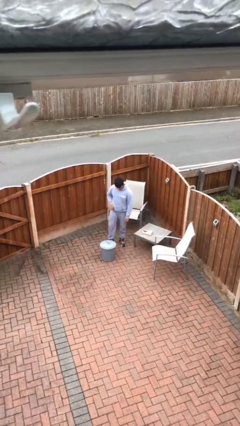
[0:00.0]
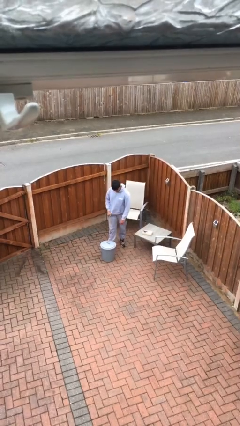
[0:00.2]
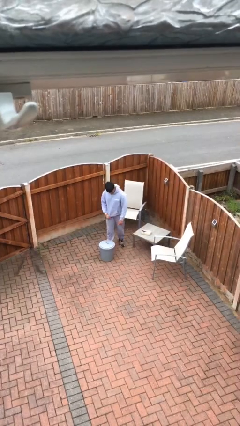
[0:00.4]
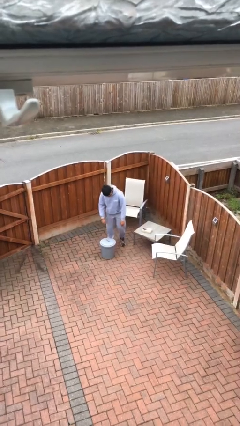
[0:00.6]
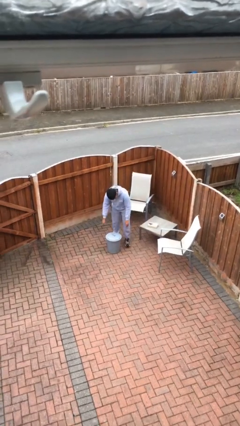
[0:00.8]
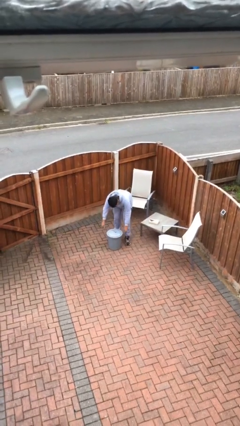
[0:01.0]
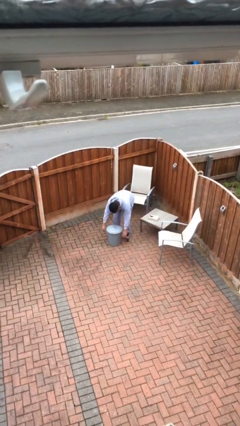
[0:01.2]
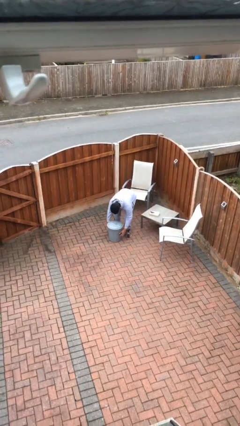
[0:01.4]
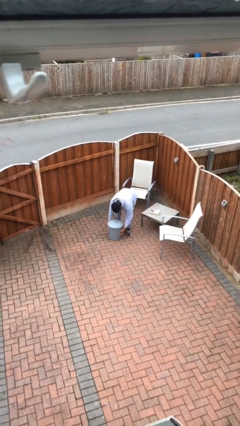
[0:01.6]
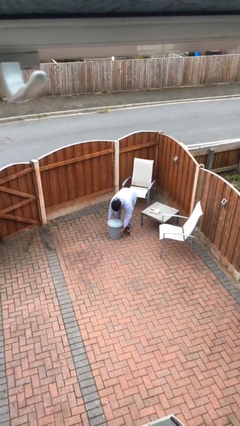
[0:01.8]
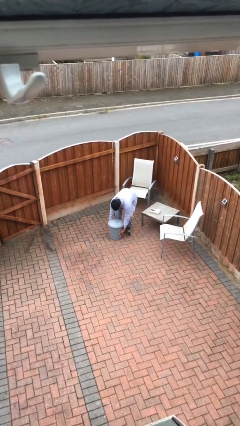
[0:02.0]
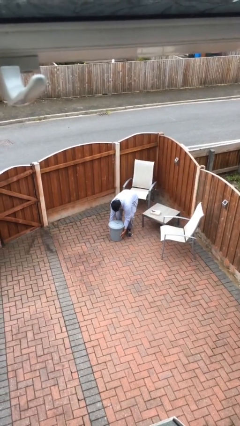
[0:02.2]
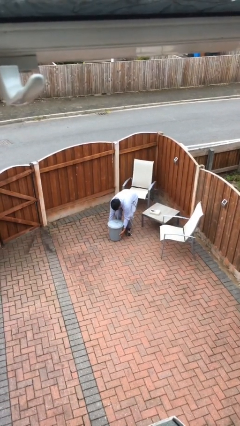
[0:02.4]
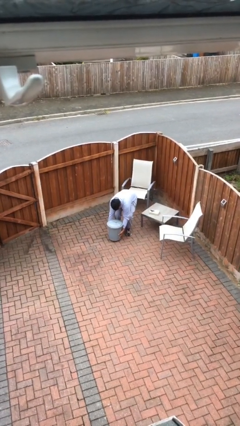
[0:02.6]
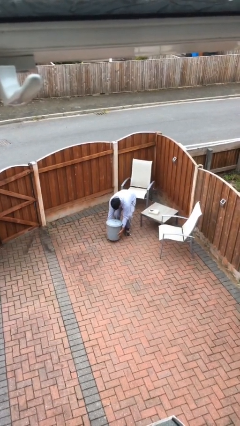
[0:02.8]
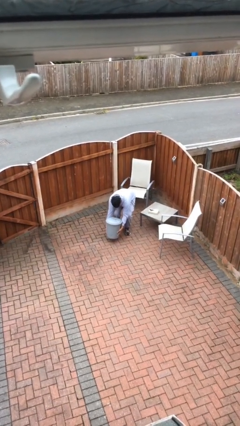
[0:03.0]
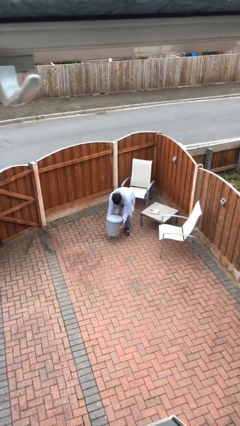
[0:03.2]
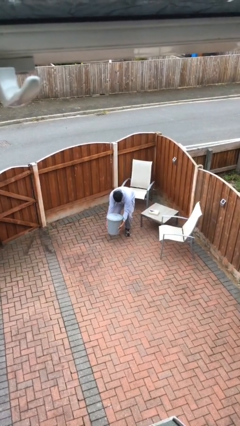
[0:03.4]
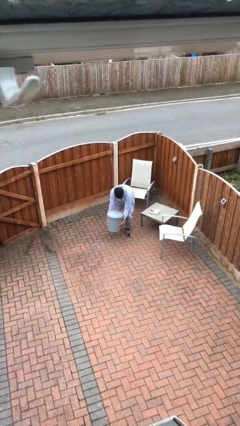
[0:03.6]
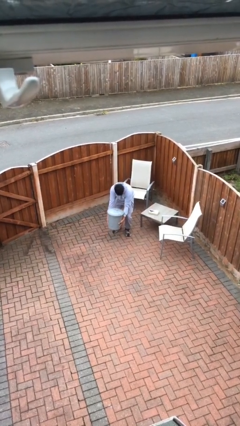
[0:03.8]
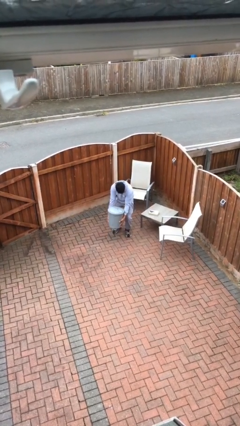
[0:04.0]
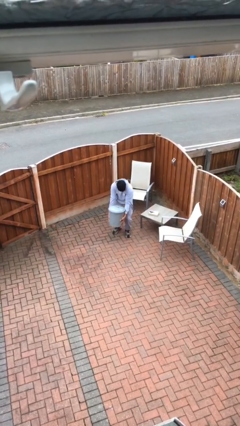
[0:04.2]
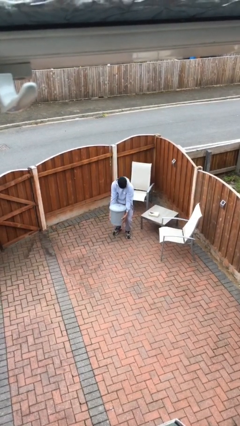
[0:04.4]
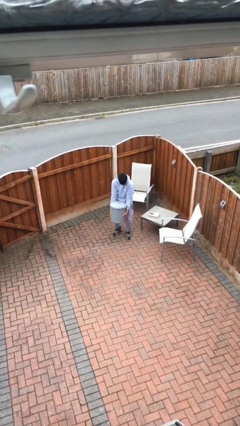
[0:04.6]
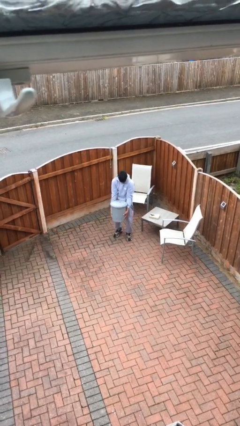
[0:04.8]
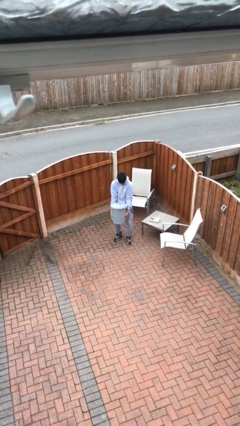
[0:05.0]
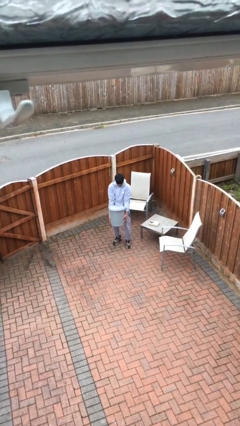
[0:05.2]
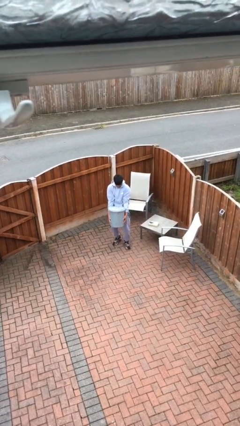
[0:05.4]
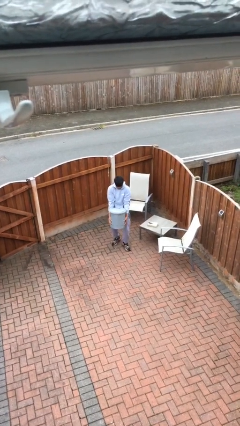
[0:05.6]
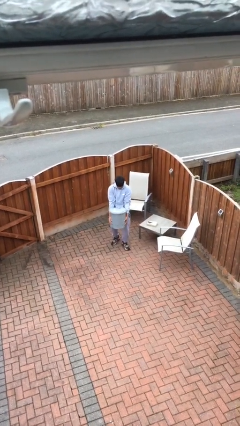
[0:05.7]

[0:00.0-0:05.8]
person picks up object from floor

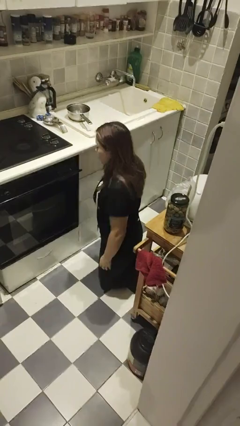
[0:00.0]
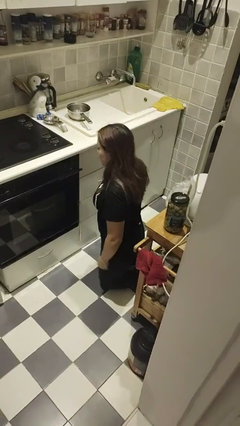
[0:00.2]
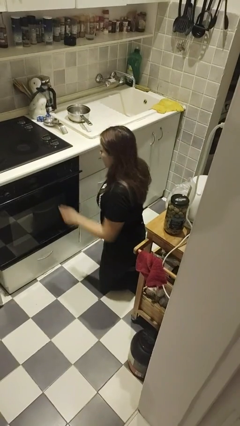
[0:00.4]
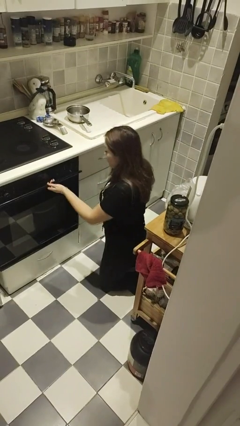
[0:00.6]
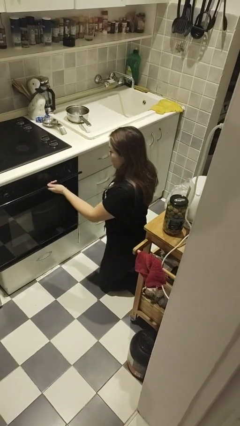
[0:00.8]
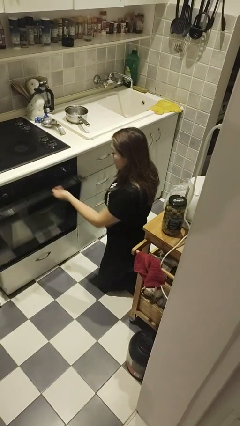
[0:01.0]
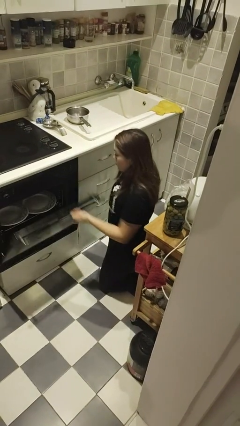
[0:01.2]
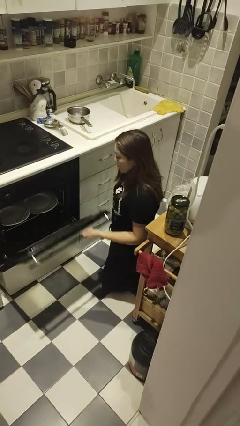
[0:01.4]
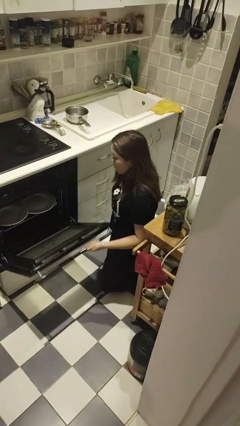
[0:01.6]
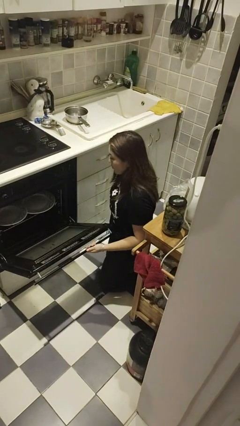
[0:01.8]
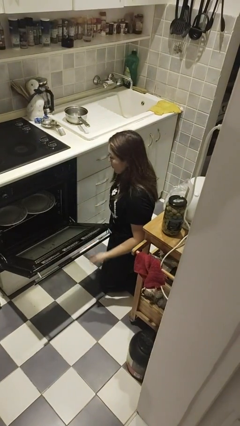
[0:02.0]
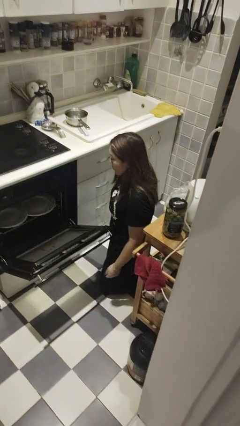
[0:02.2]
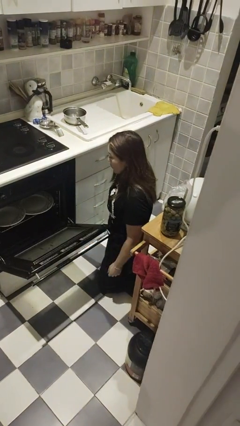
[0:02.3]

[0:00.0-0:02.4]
person opens dishwasher

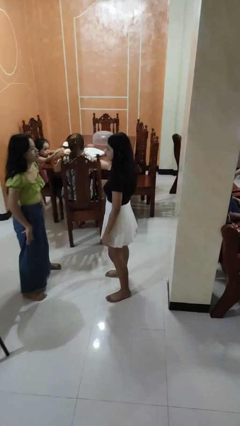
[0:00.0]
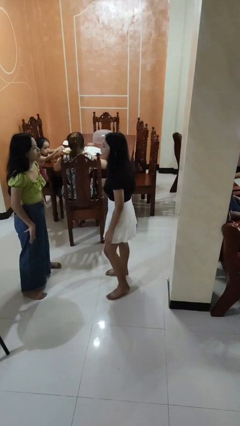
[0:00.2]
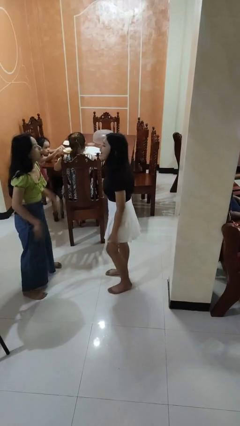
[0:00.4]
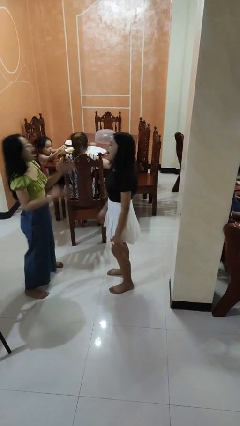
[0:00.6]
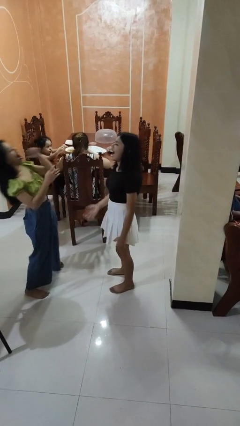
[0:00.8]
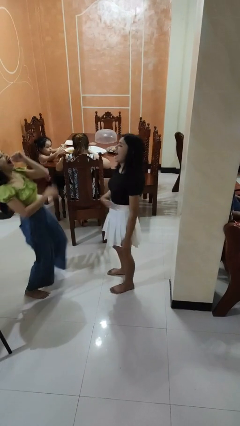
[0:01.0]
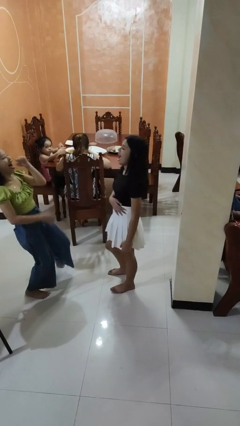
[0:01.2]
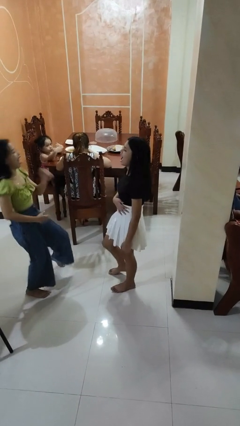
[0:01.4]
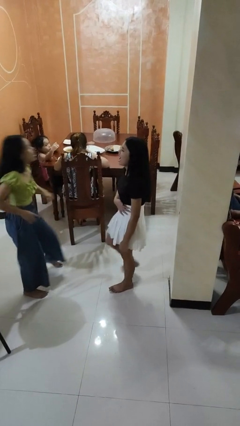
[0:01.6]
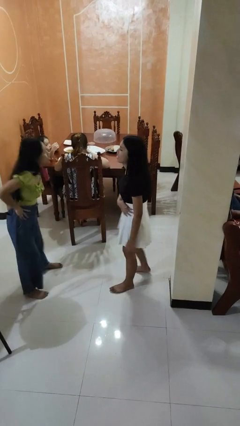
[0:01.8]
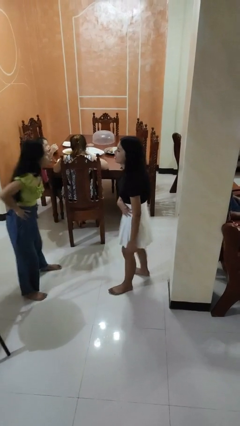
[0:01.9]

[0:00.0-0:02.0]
person laughs with person

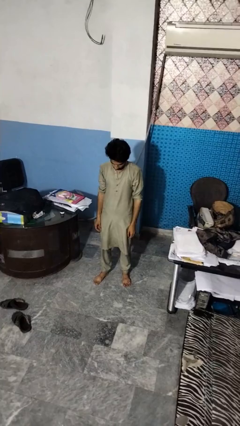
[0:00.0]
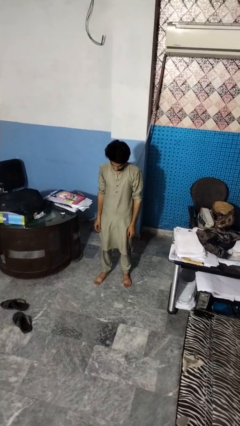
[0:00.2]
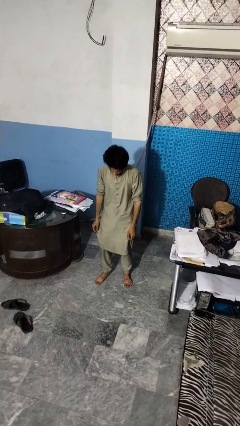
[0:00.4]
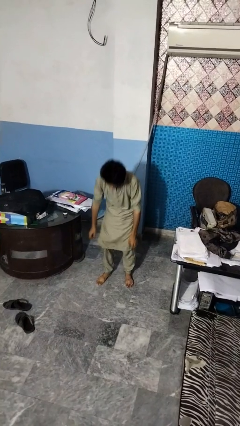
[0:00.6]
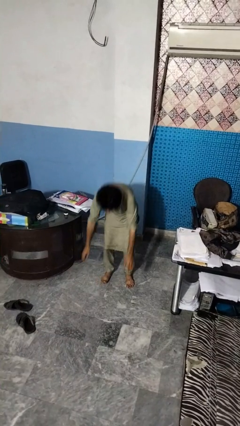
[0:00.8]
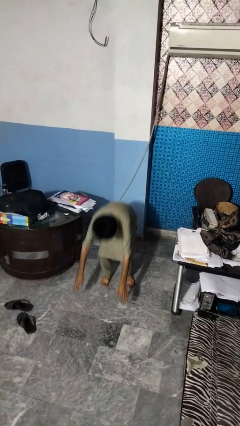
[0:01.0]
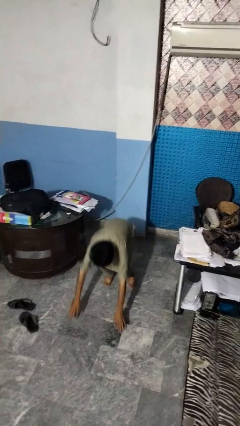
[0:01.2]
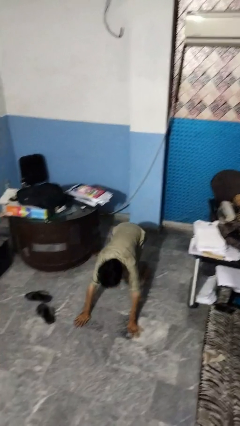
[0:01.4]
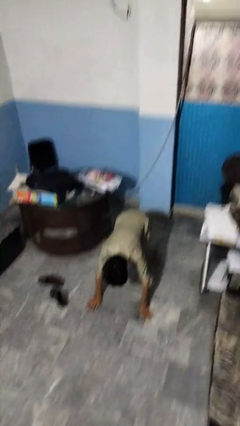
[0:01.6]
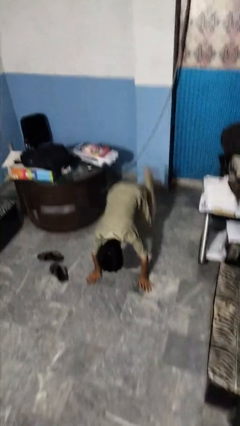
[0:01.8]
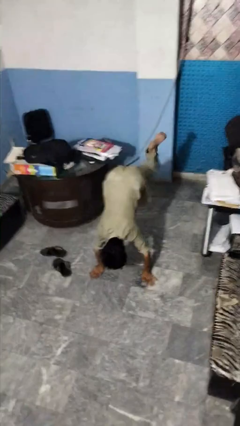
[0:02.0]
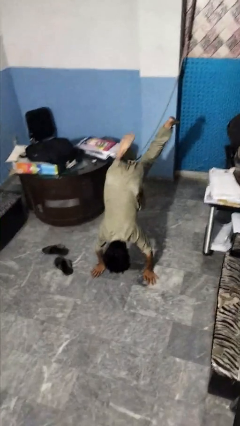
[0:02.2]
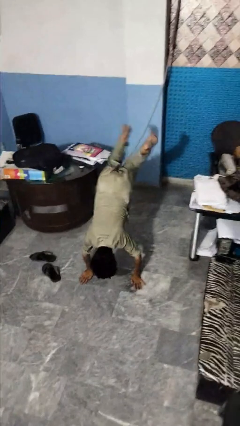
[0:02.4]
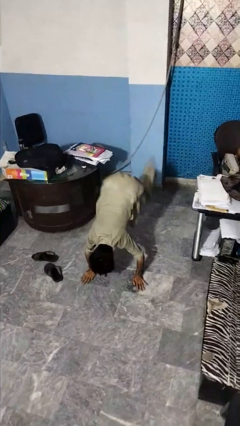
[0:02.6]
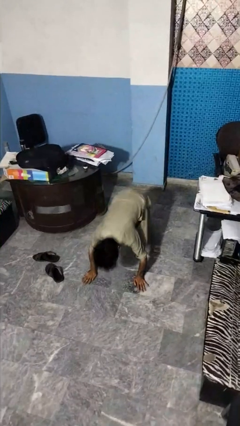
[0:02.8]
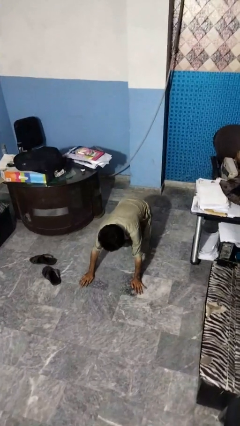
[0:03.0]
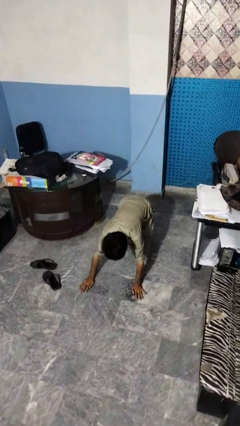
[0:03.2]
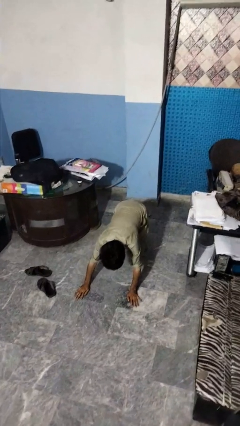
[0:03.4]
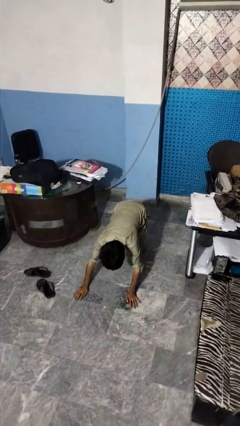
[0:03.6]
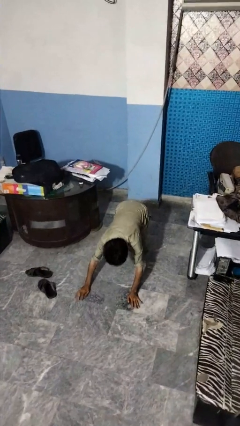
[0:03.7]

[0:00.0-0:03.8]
person handstand

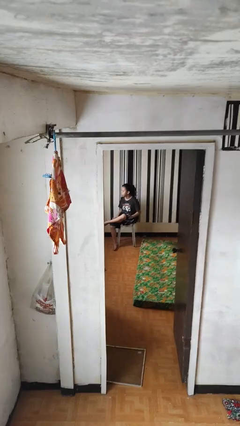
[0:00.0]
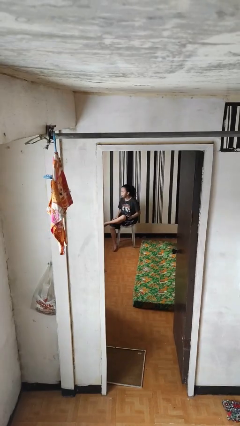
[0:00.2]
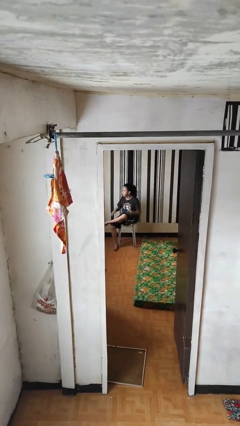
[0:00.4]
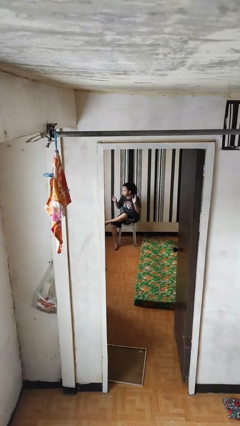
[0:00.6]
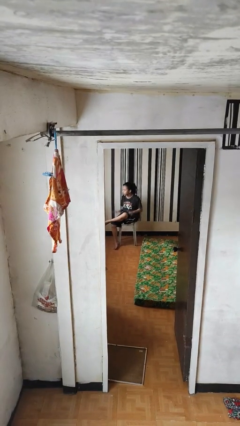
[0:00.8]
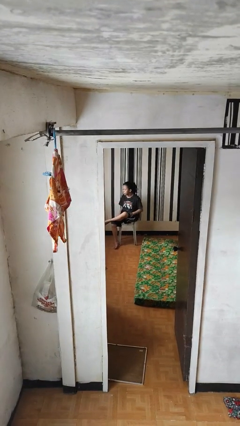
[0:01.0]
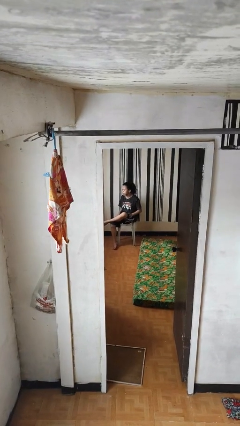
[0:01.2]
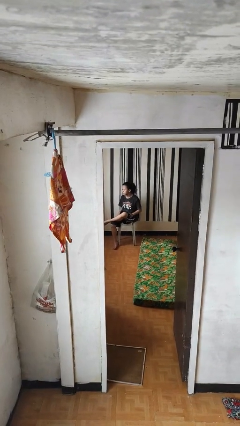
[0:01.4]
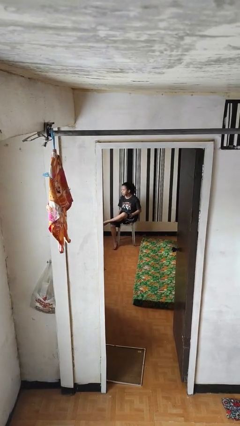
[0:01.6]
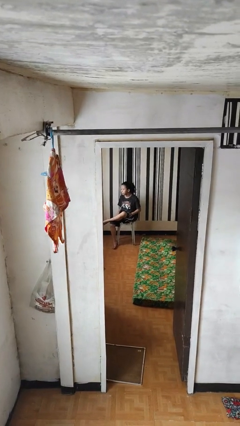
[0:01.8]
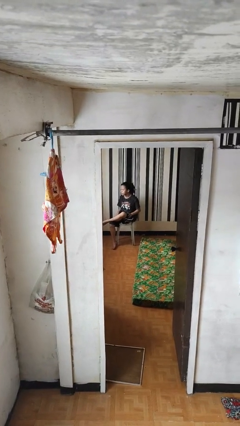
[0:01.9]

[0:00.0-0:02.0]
person slaps hands on thighs

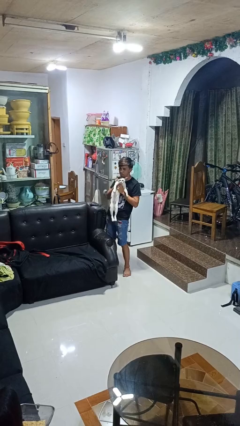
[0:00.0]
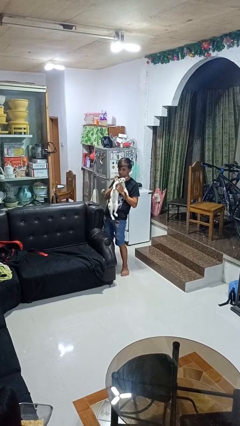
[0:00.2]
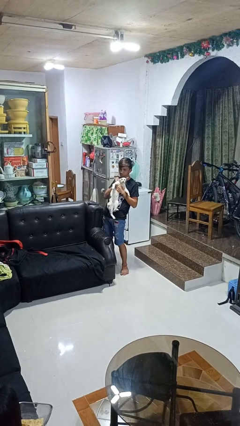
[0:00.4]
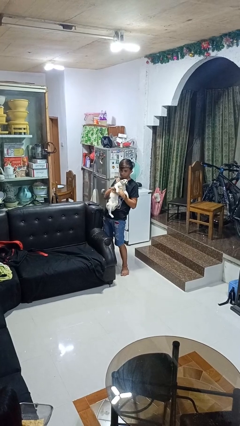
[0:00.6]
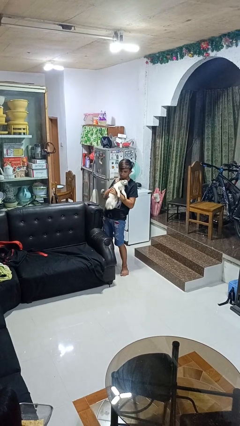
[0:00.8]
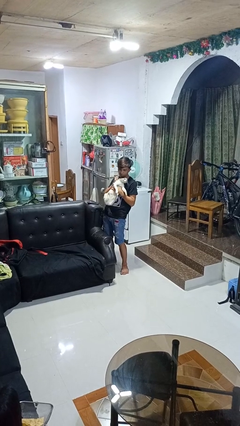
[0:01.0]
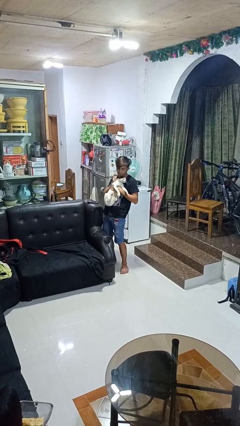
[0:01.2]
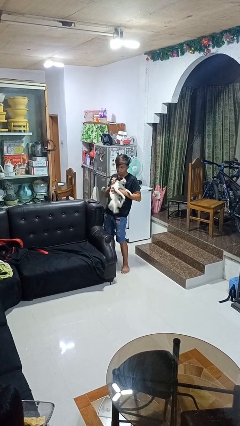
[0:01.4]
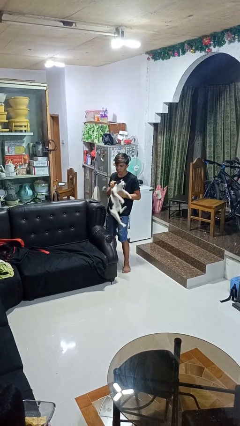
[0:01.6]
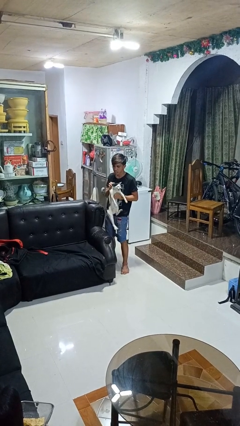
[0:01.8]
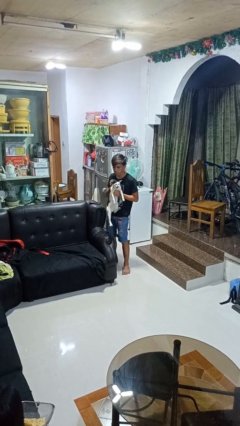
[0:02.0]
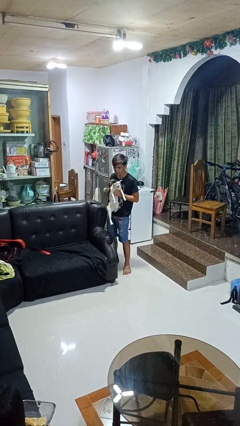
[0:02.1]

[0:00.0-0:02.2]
person hugs cat
